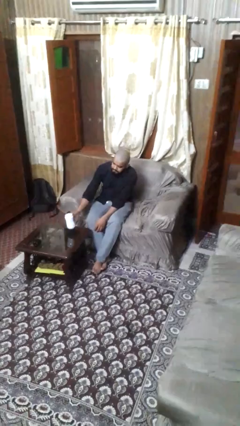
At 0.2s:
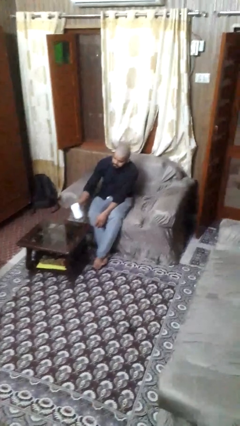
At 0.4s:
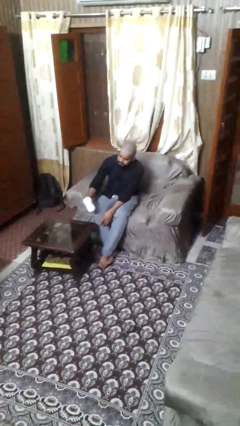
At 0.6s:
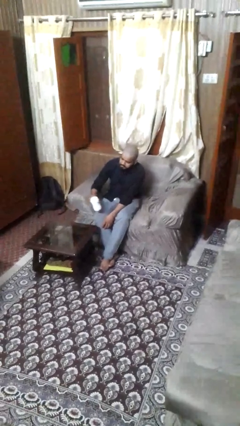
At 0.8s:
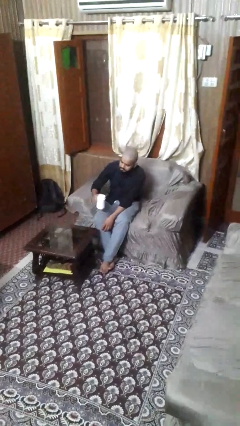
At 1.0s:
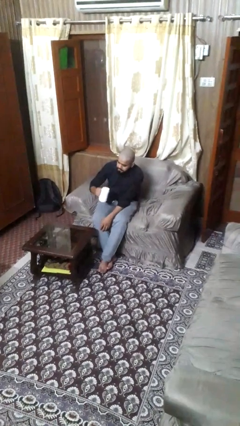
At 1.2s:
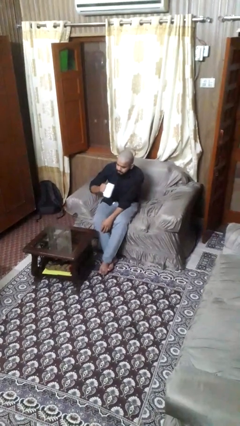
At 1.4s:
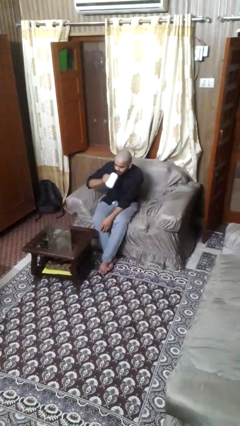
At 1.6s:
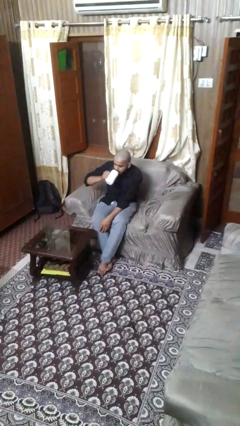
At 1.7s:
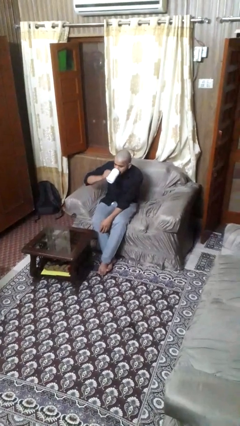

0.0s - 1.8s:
person picks up object from table

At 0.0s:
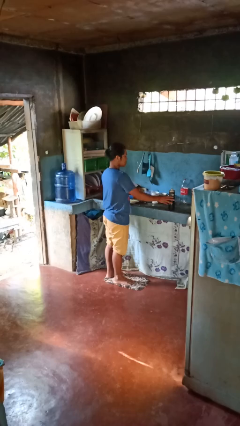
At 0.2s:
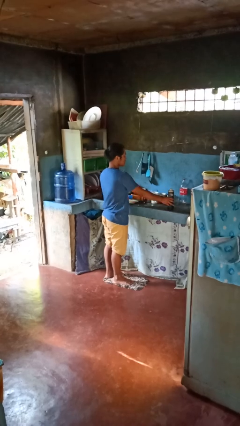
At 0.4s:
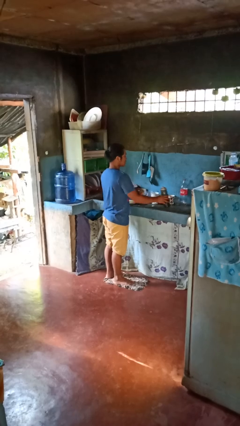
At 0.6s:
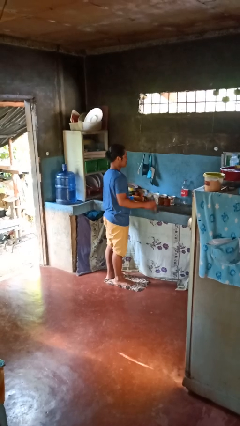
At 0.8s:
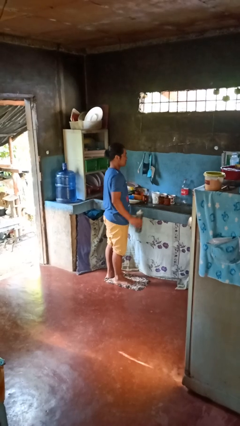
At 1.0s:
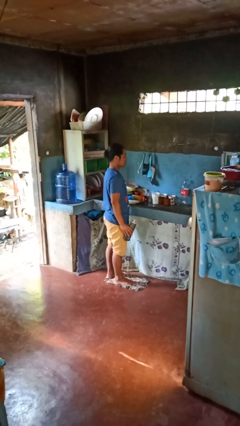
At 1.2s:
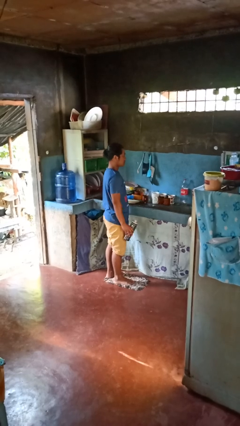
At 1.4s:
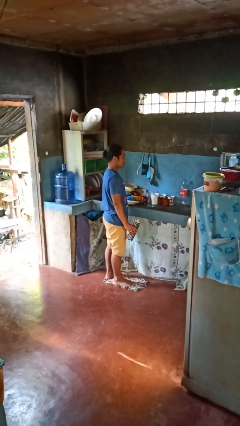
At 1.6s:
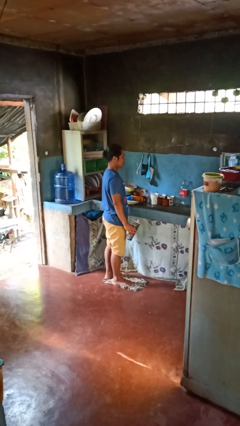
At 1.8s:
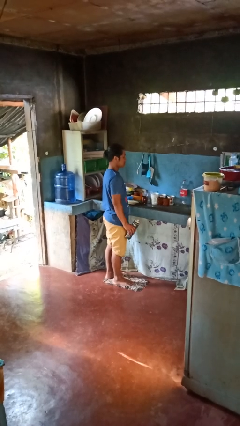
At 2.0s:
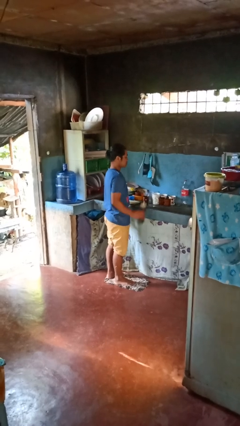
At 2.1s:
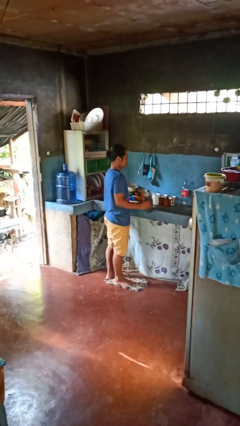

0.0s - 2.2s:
person picks up object from countertop

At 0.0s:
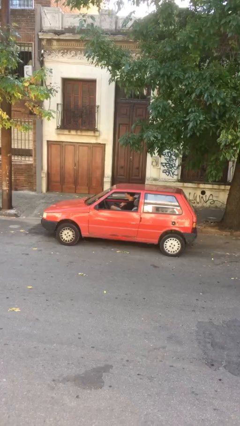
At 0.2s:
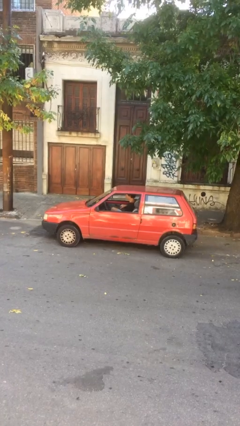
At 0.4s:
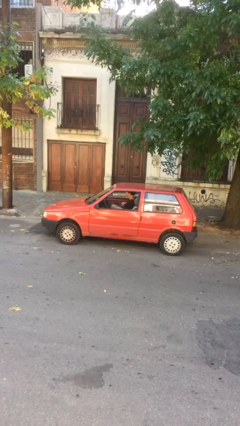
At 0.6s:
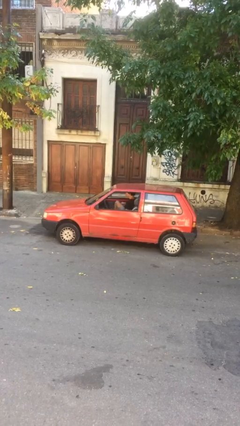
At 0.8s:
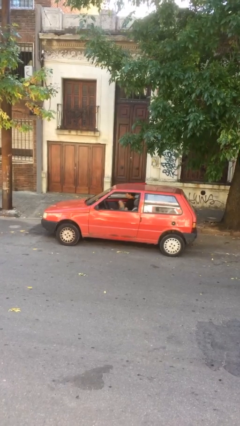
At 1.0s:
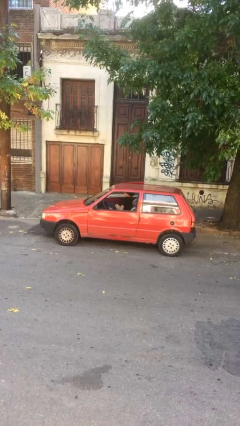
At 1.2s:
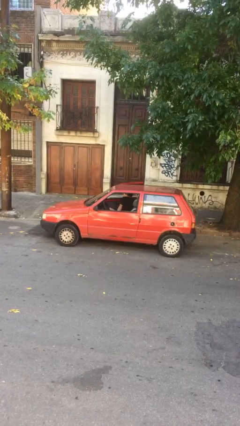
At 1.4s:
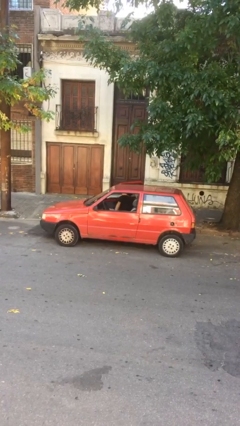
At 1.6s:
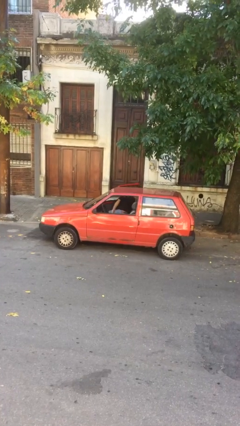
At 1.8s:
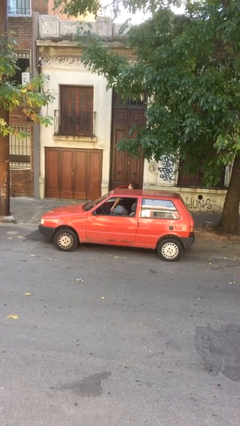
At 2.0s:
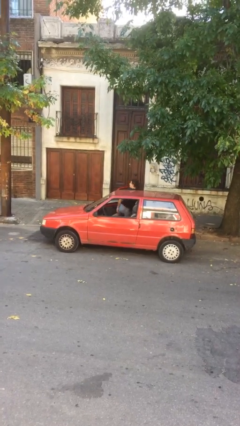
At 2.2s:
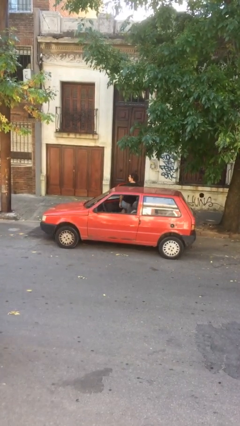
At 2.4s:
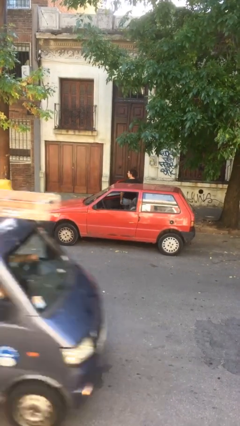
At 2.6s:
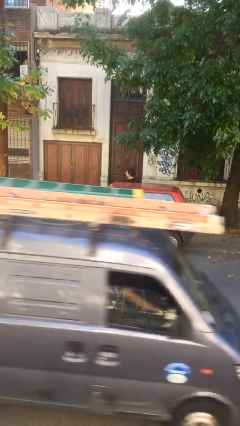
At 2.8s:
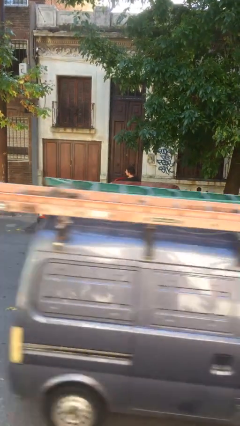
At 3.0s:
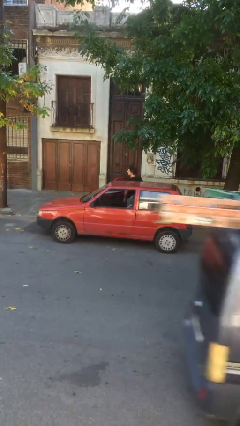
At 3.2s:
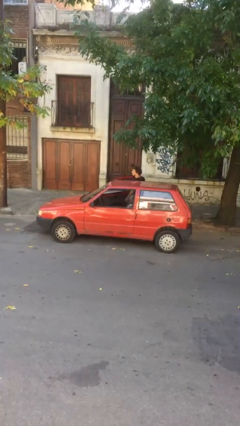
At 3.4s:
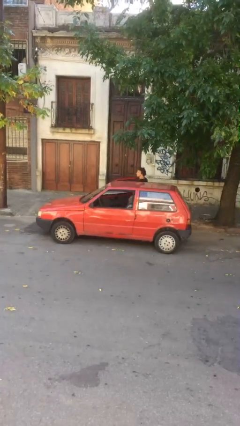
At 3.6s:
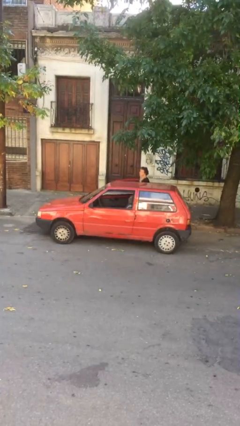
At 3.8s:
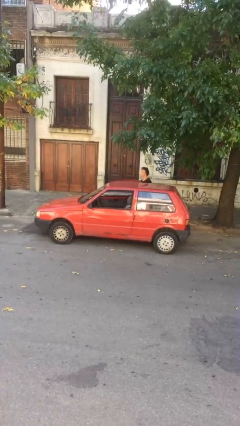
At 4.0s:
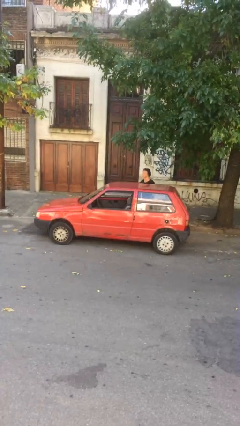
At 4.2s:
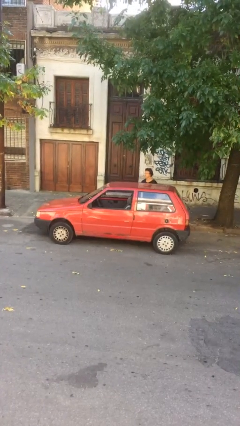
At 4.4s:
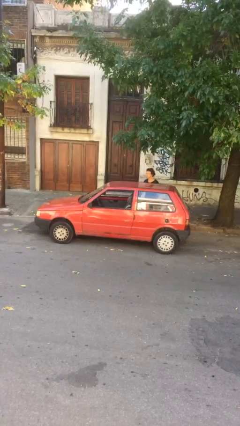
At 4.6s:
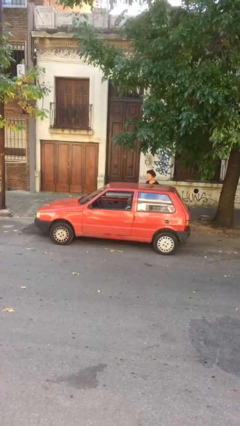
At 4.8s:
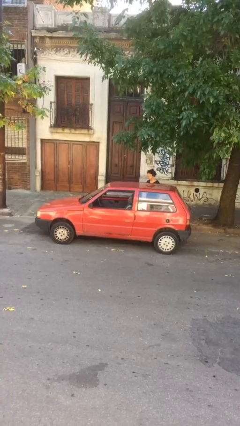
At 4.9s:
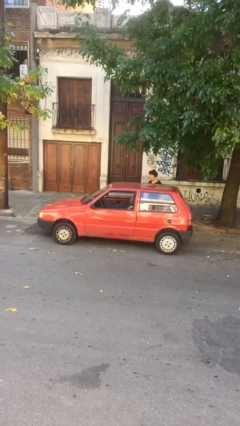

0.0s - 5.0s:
car drops off person

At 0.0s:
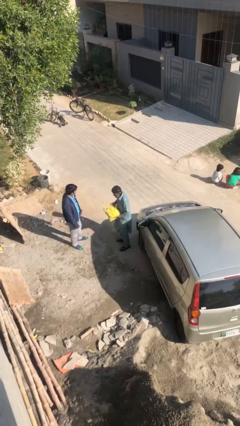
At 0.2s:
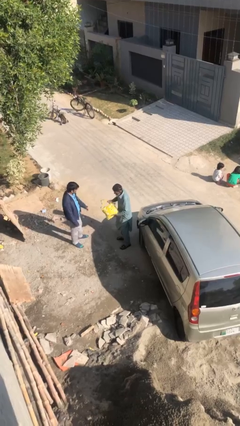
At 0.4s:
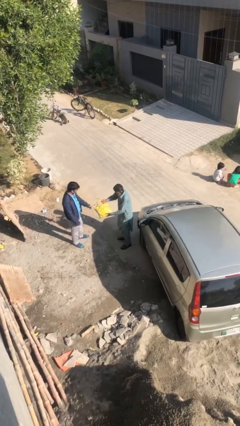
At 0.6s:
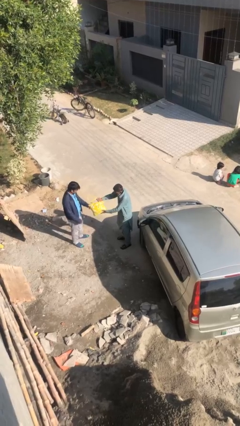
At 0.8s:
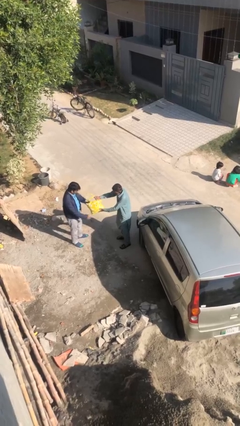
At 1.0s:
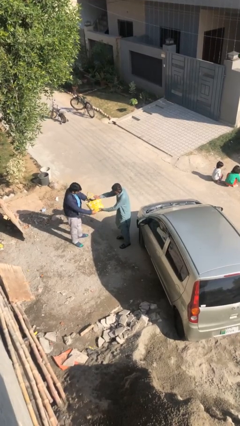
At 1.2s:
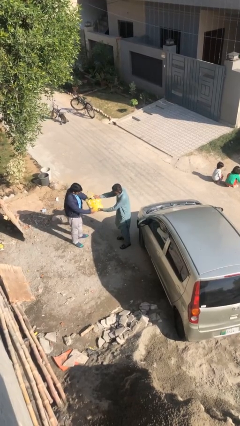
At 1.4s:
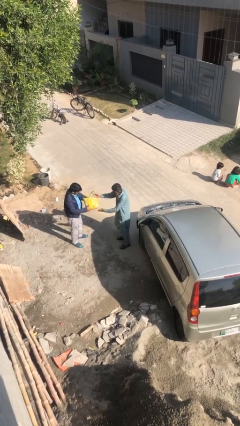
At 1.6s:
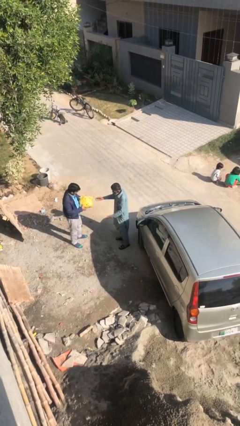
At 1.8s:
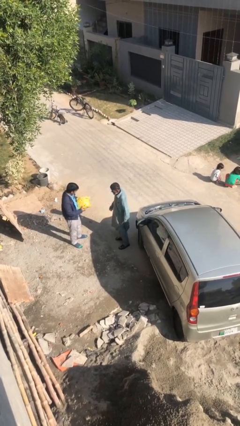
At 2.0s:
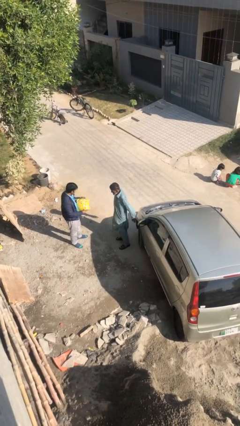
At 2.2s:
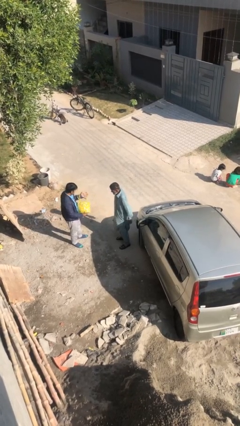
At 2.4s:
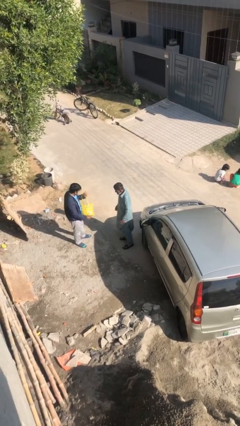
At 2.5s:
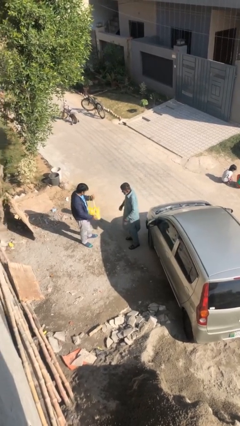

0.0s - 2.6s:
person transfers object to person

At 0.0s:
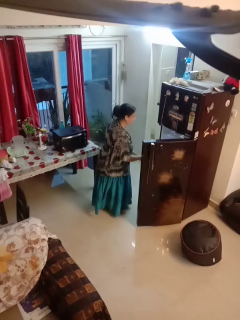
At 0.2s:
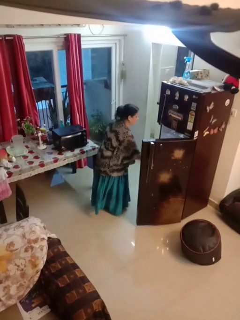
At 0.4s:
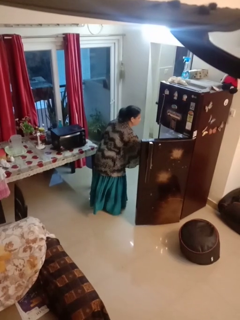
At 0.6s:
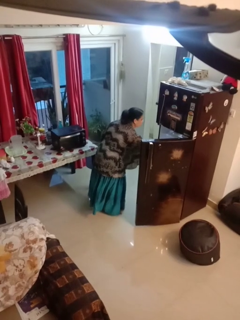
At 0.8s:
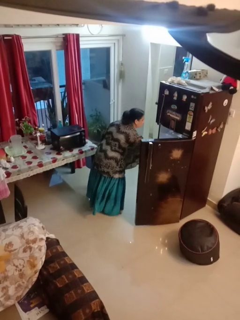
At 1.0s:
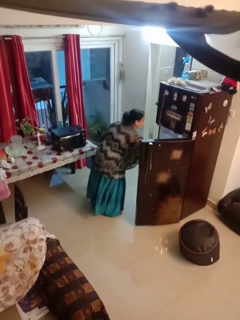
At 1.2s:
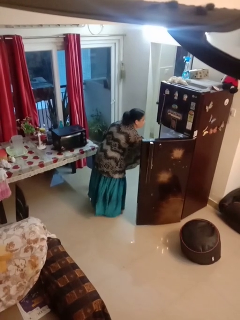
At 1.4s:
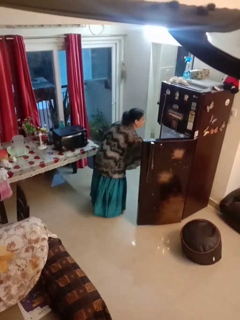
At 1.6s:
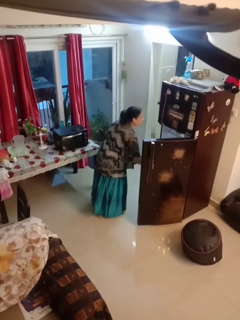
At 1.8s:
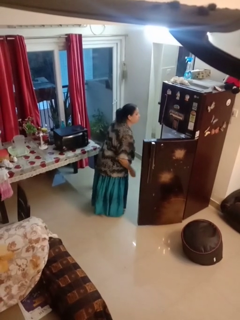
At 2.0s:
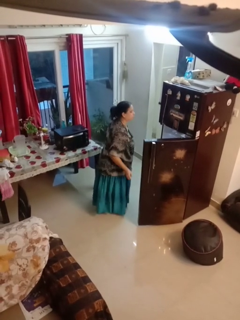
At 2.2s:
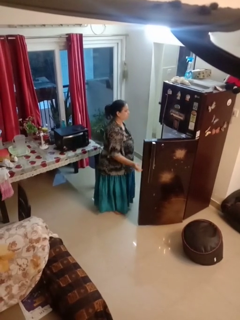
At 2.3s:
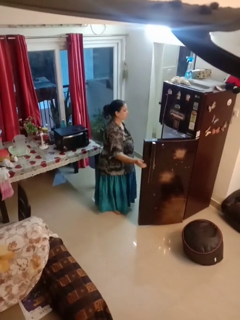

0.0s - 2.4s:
person puts object into refrigerator

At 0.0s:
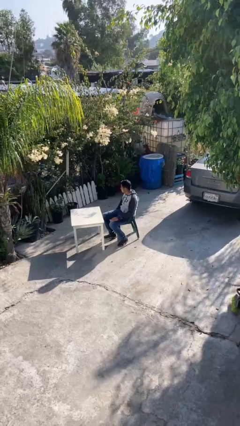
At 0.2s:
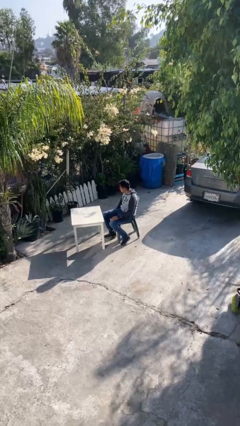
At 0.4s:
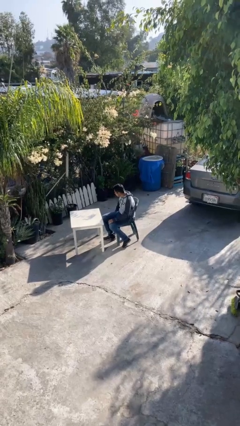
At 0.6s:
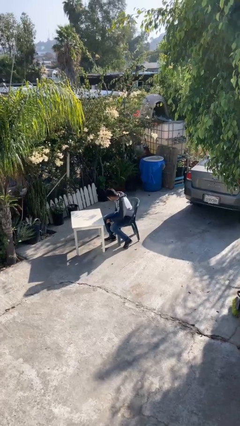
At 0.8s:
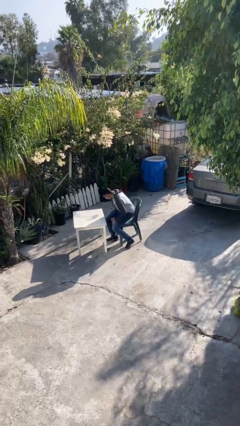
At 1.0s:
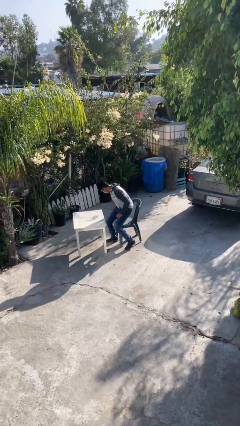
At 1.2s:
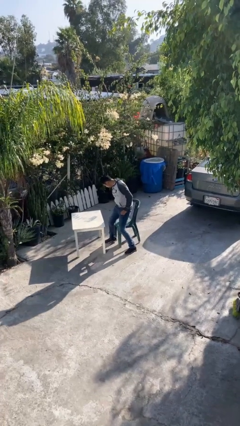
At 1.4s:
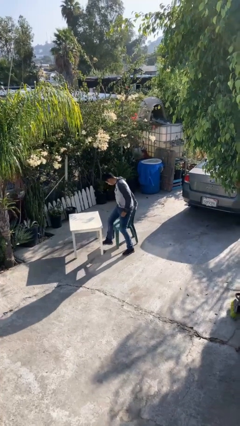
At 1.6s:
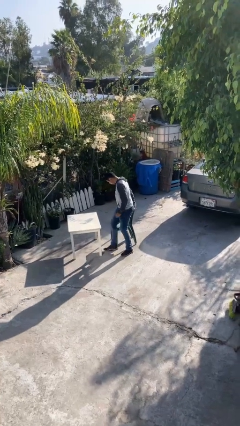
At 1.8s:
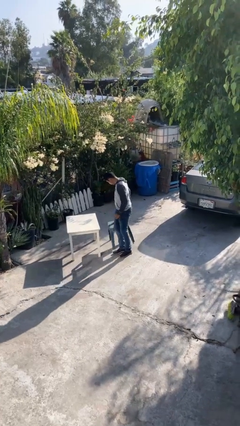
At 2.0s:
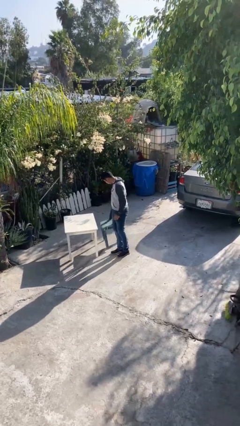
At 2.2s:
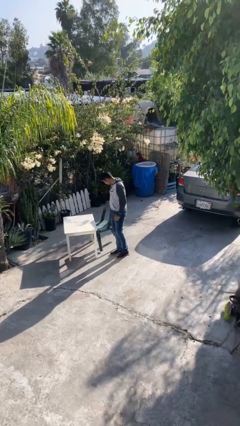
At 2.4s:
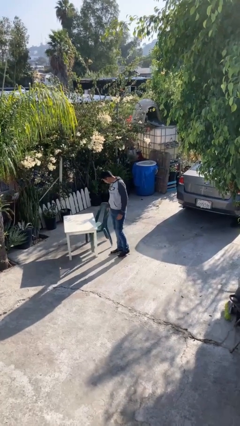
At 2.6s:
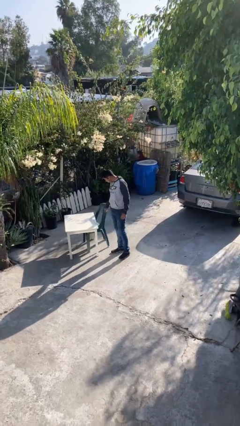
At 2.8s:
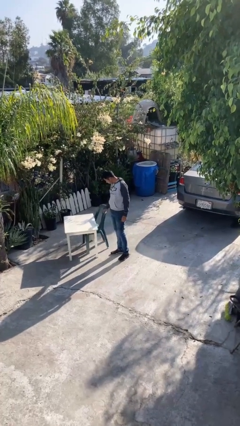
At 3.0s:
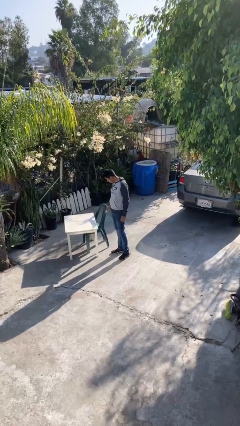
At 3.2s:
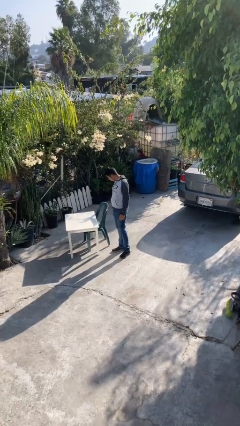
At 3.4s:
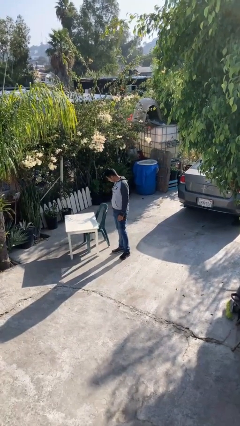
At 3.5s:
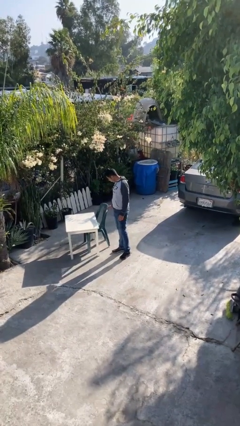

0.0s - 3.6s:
person stands up

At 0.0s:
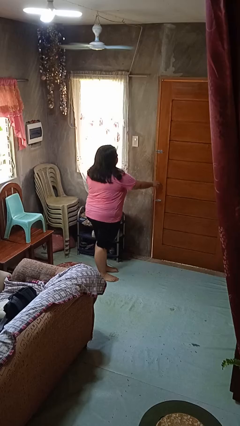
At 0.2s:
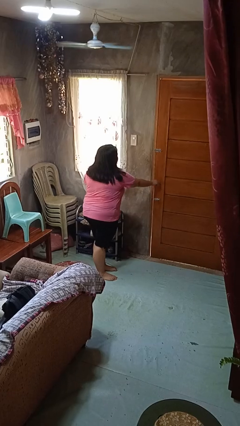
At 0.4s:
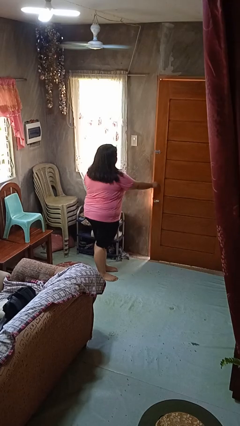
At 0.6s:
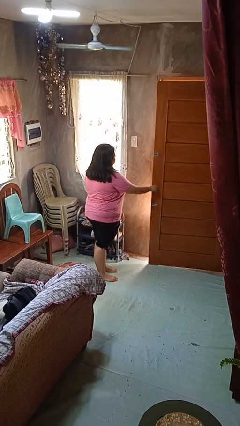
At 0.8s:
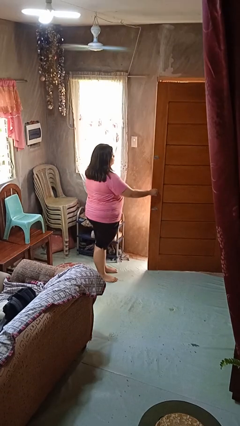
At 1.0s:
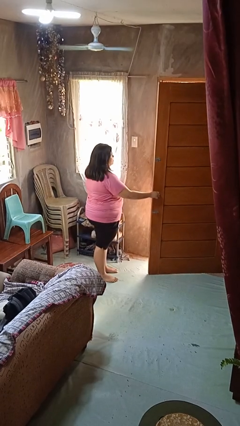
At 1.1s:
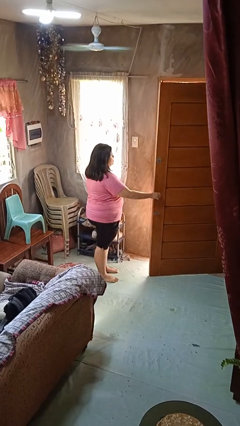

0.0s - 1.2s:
person opens facility door
